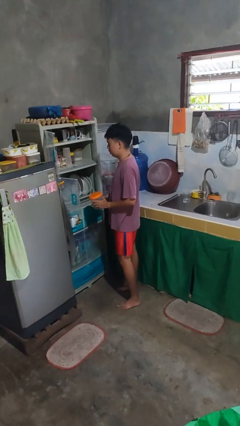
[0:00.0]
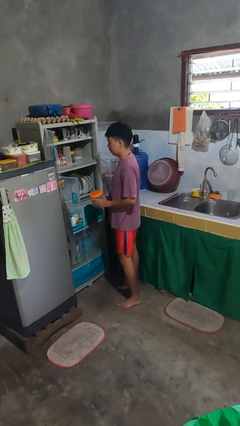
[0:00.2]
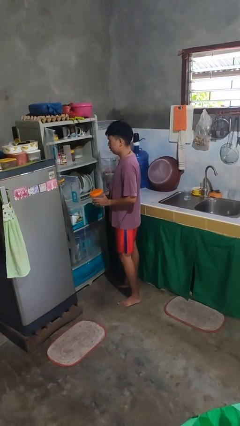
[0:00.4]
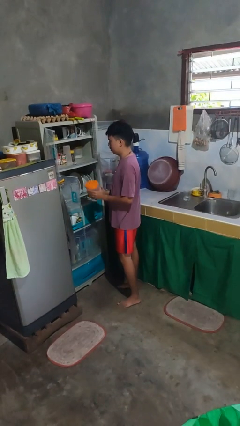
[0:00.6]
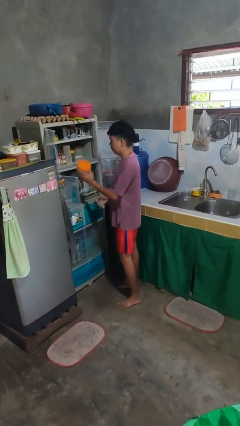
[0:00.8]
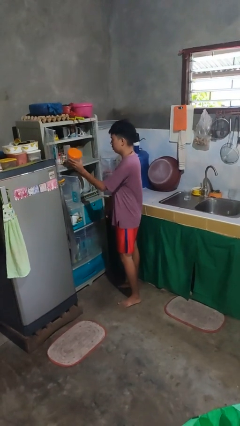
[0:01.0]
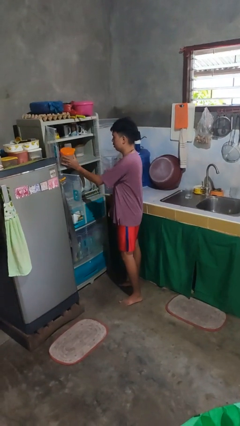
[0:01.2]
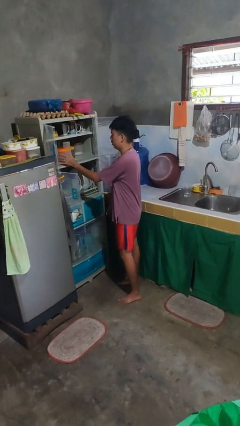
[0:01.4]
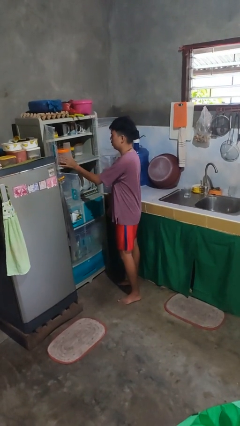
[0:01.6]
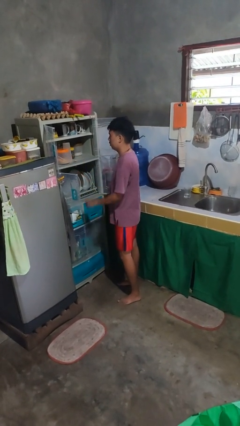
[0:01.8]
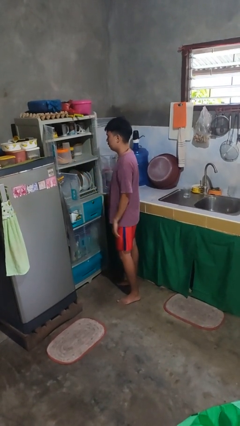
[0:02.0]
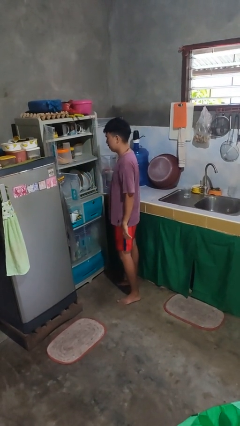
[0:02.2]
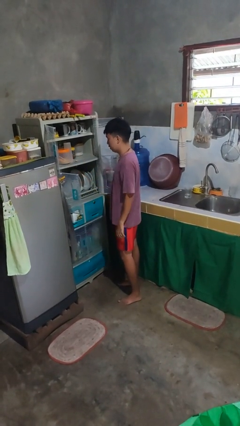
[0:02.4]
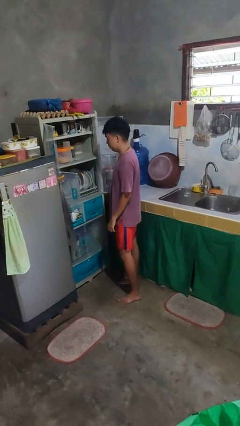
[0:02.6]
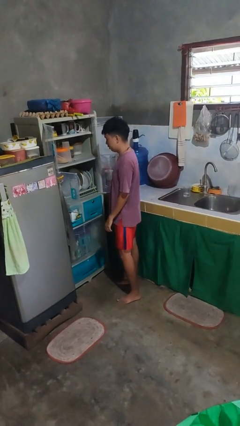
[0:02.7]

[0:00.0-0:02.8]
person puts object in cabinet

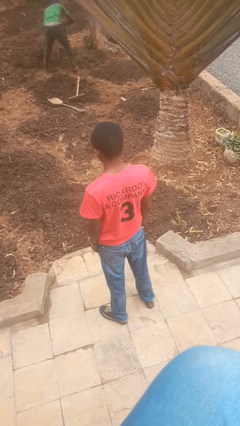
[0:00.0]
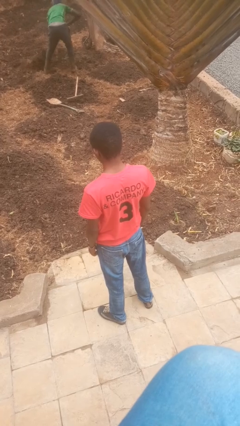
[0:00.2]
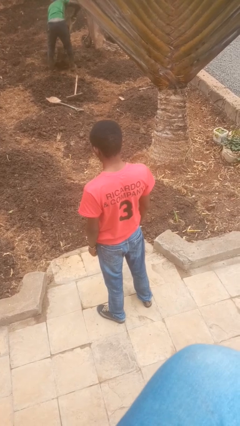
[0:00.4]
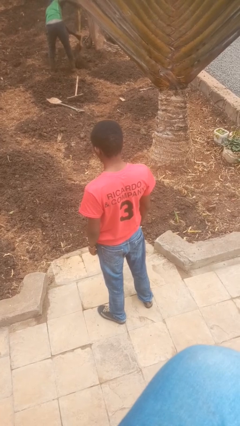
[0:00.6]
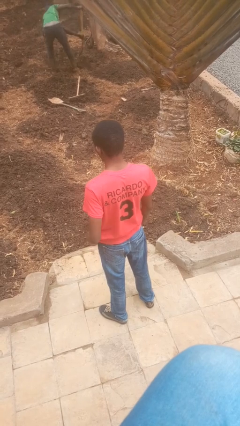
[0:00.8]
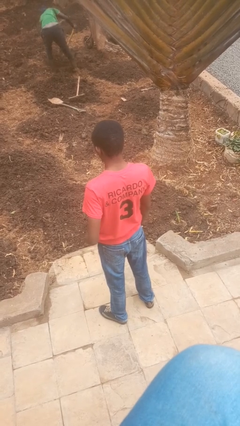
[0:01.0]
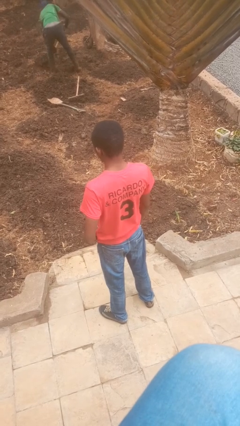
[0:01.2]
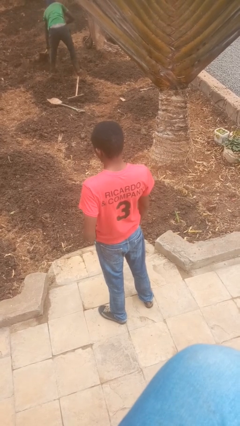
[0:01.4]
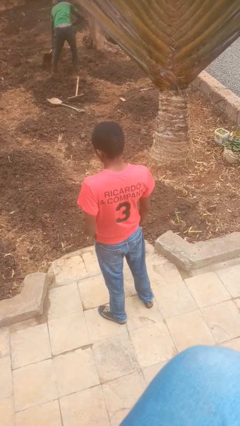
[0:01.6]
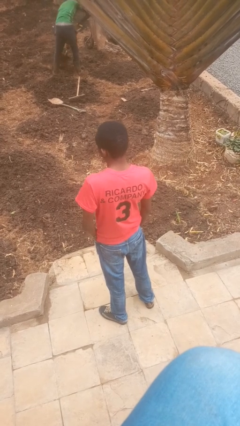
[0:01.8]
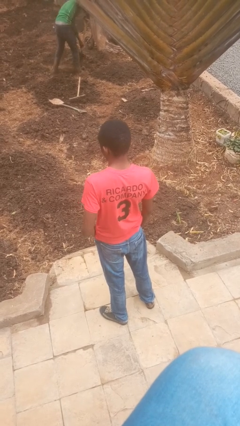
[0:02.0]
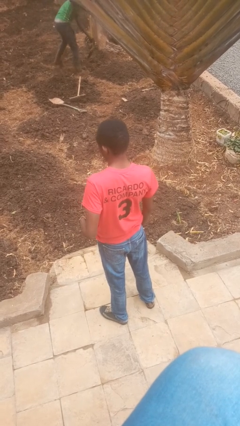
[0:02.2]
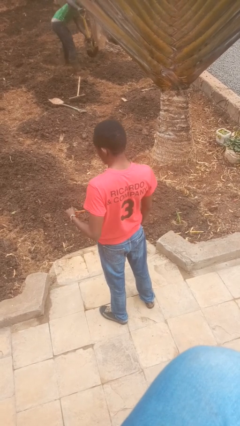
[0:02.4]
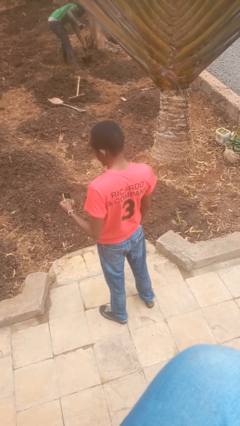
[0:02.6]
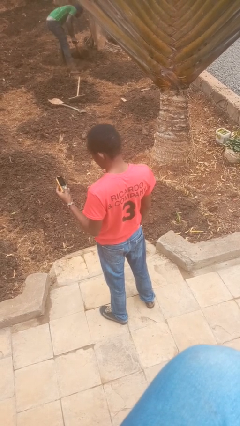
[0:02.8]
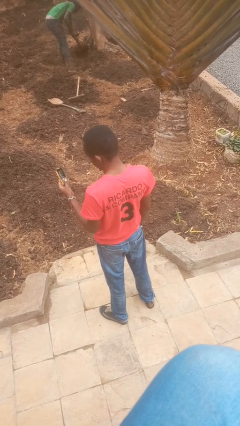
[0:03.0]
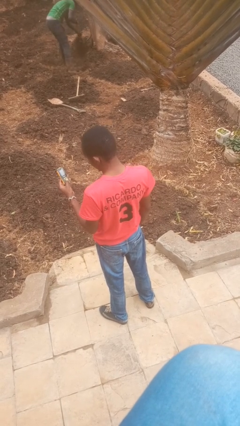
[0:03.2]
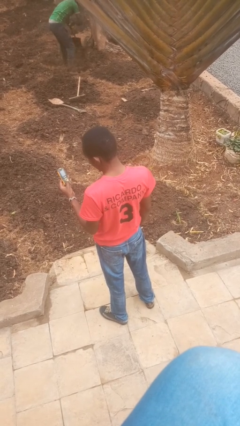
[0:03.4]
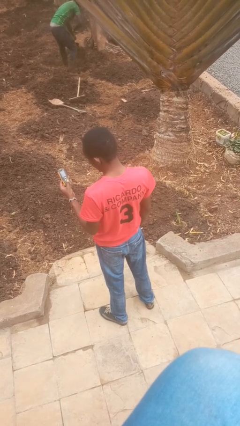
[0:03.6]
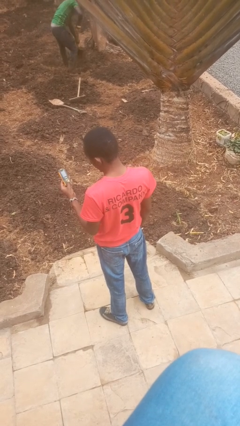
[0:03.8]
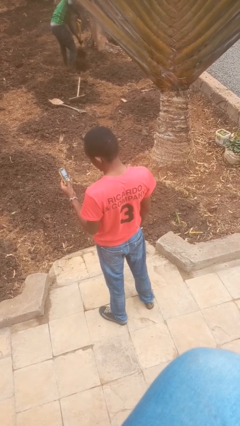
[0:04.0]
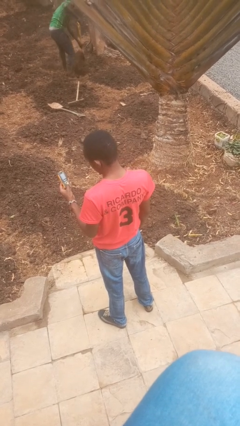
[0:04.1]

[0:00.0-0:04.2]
person takes phone from pocket

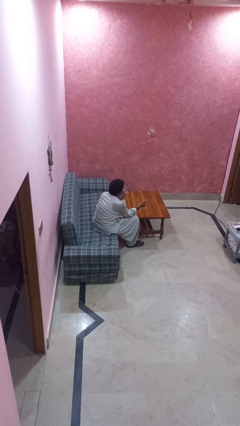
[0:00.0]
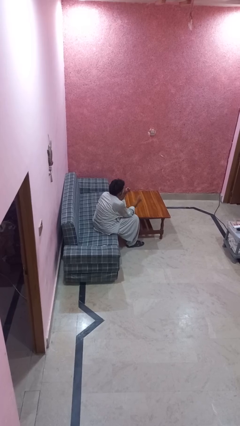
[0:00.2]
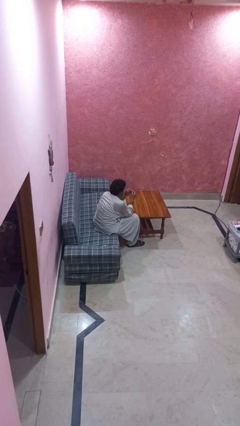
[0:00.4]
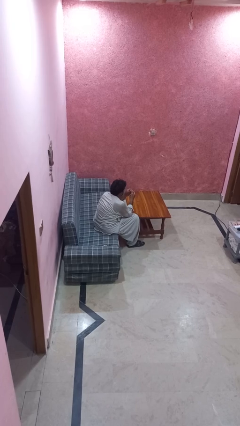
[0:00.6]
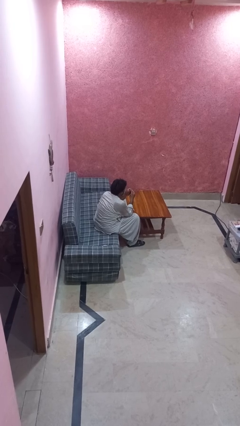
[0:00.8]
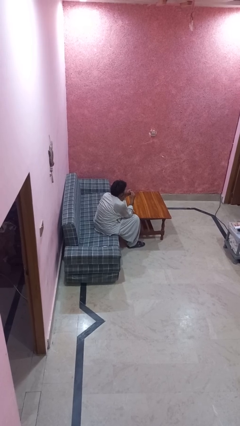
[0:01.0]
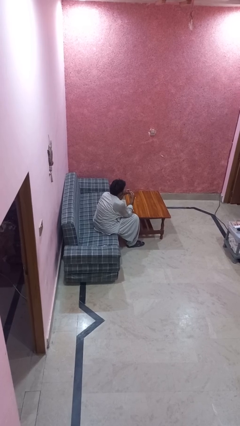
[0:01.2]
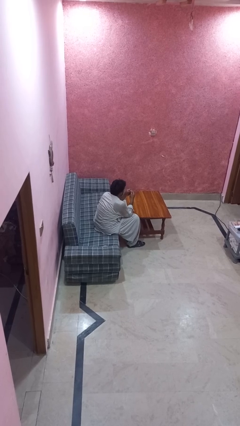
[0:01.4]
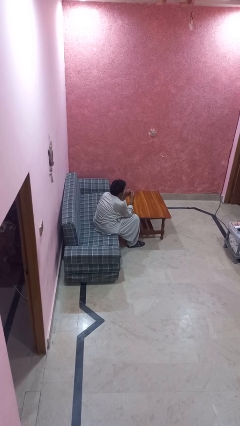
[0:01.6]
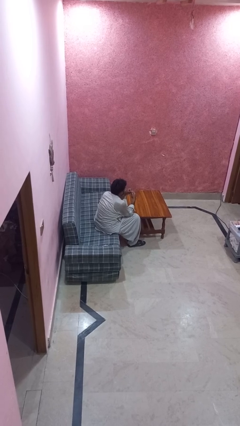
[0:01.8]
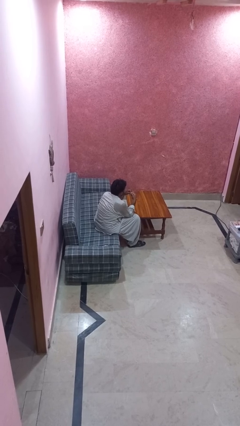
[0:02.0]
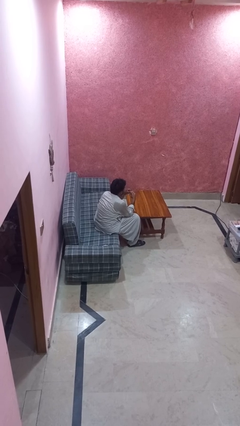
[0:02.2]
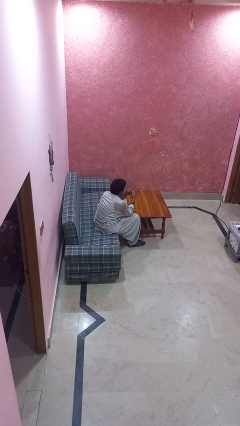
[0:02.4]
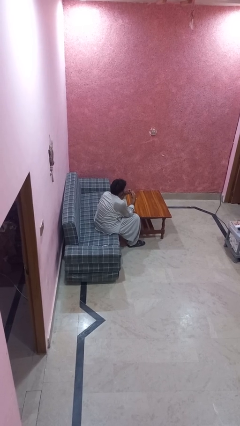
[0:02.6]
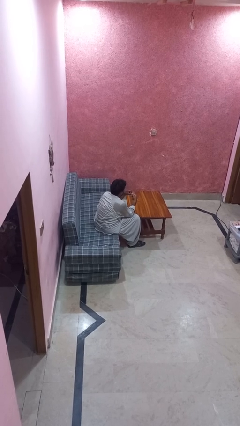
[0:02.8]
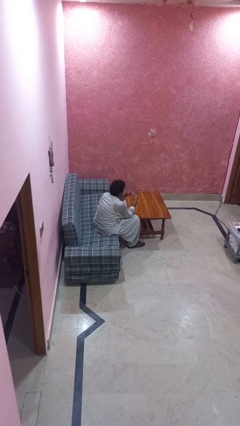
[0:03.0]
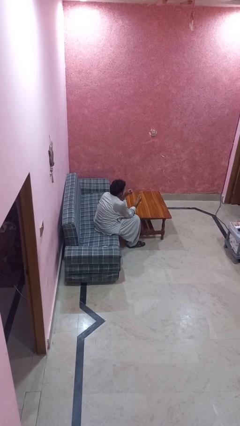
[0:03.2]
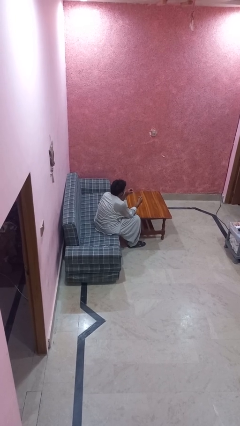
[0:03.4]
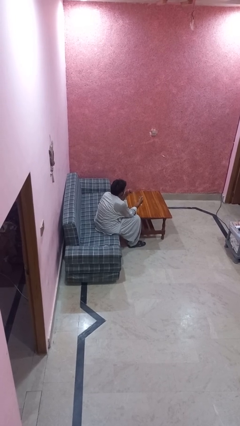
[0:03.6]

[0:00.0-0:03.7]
person files fingernails

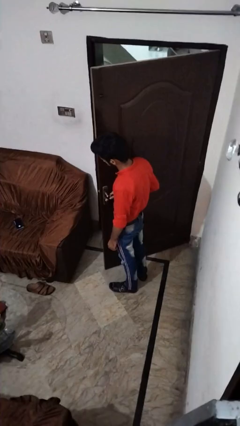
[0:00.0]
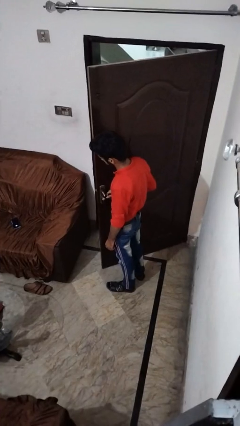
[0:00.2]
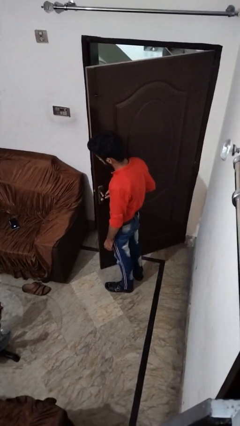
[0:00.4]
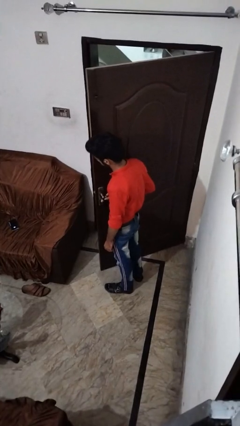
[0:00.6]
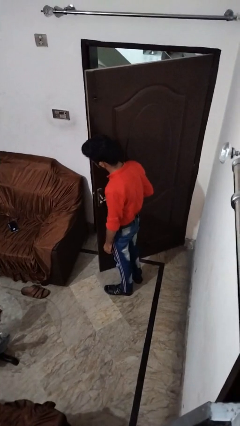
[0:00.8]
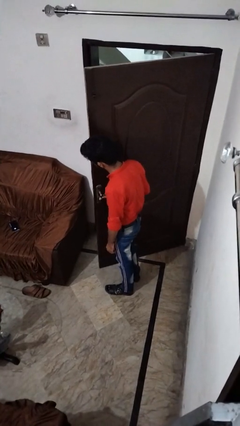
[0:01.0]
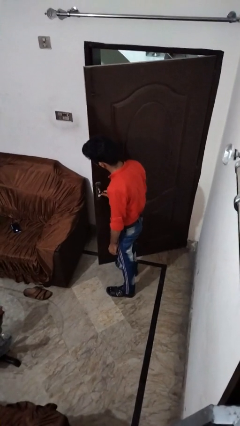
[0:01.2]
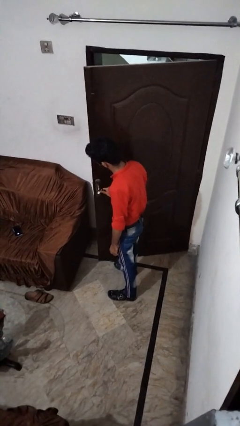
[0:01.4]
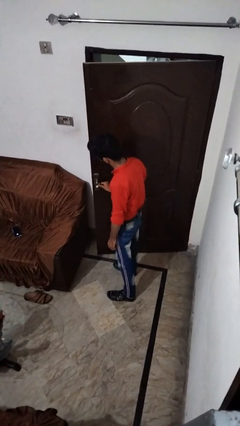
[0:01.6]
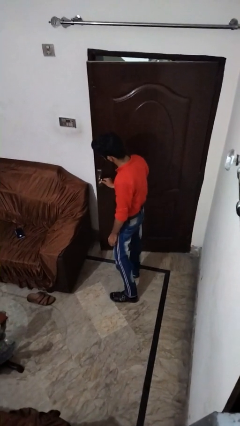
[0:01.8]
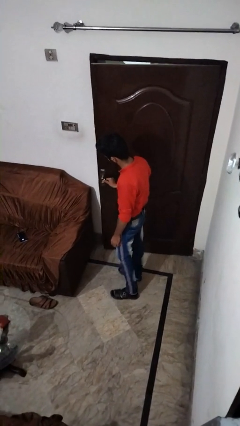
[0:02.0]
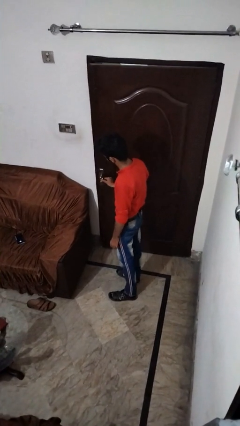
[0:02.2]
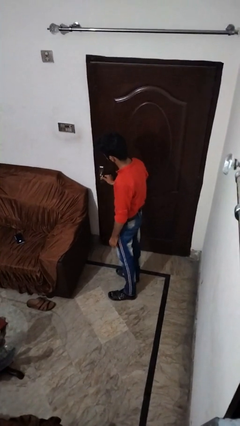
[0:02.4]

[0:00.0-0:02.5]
person closes facility door

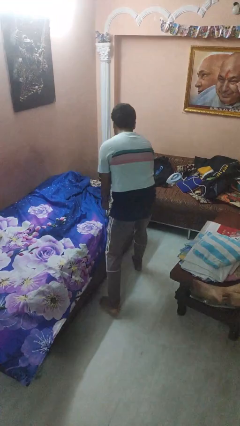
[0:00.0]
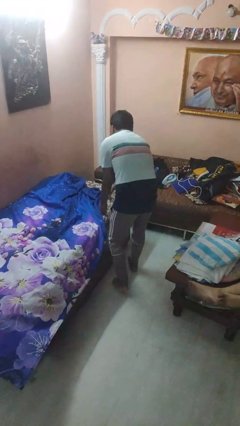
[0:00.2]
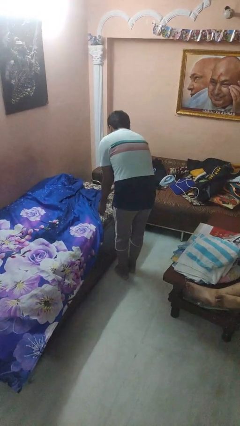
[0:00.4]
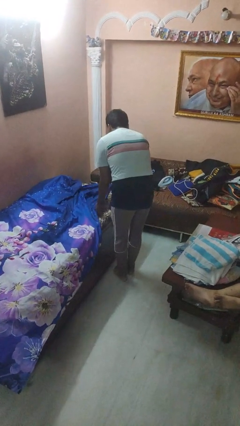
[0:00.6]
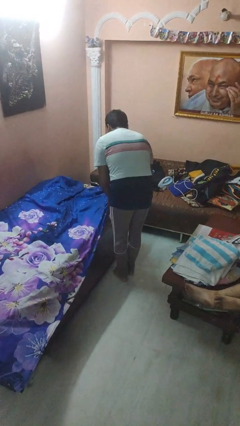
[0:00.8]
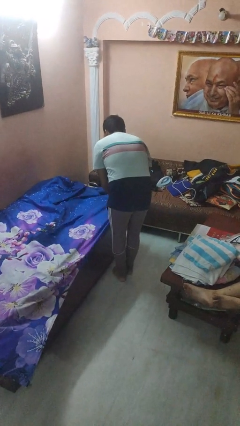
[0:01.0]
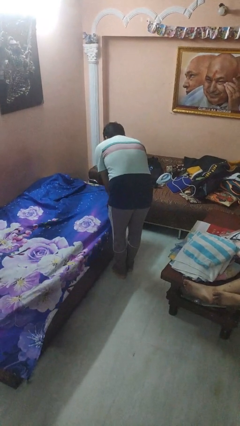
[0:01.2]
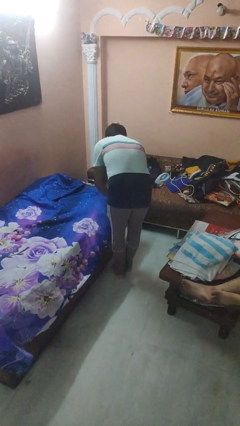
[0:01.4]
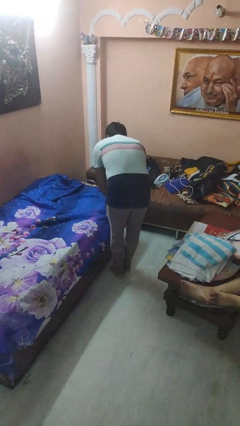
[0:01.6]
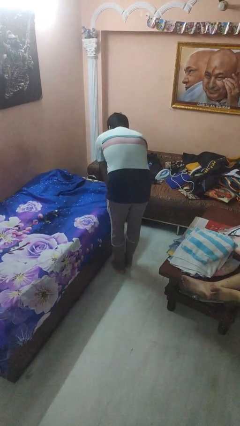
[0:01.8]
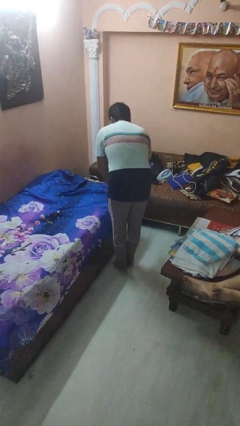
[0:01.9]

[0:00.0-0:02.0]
person makes bed

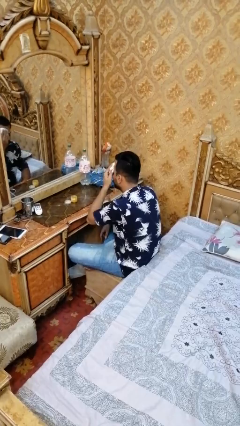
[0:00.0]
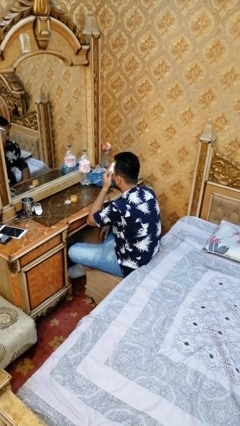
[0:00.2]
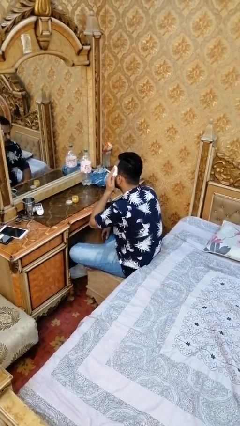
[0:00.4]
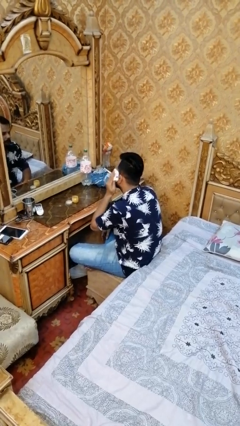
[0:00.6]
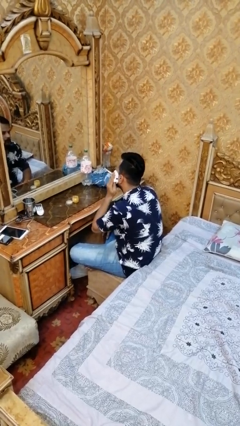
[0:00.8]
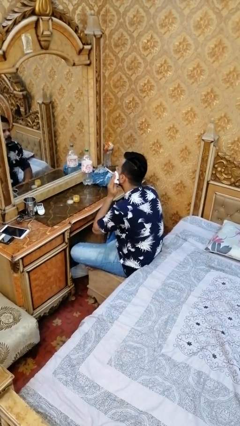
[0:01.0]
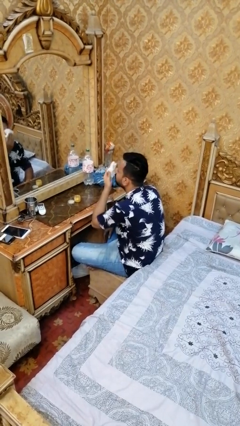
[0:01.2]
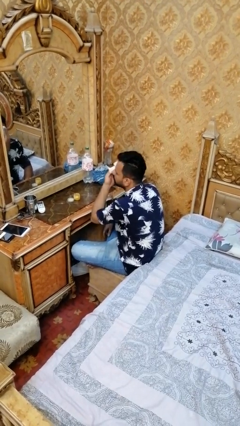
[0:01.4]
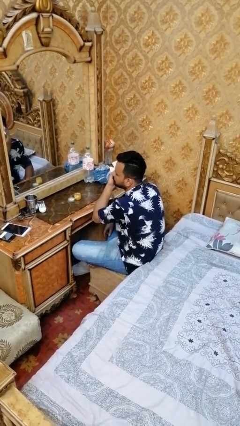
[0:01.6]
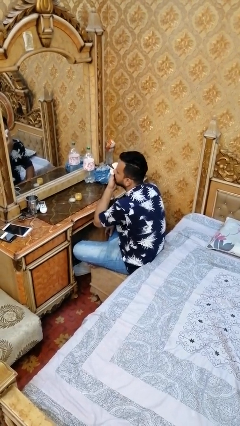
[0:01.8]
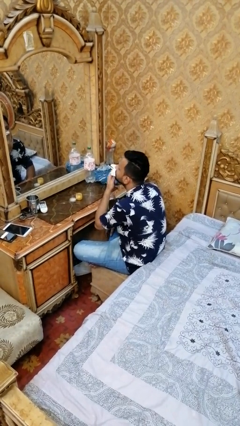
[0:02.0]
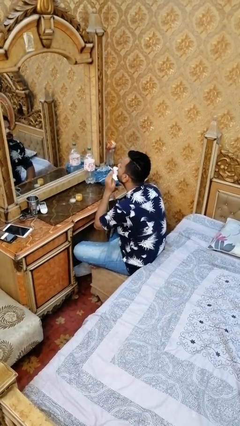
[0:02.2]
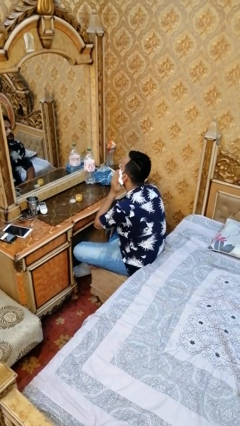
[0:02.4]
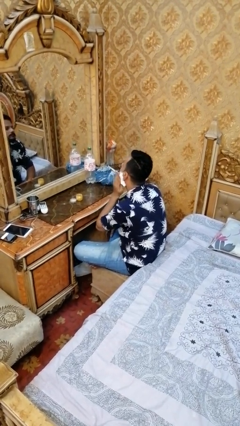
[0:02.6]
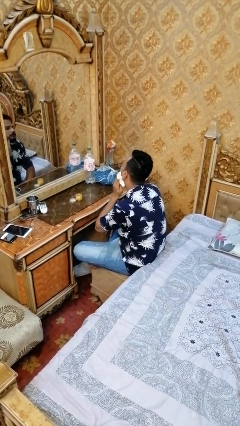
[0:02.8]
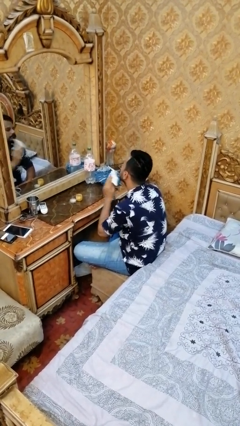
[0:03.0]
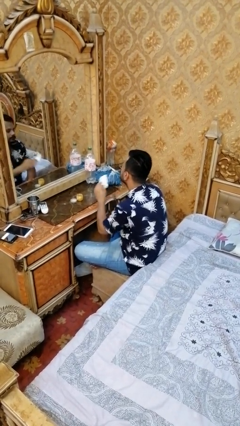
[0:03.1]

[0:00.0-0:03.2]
person takes off facemask
